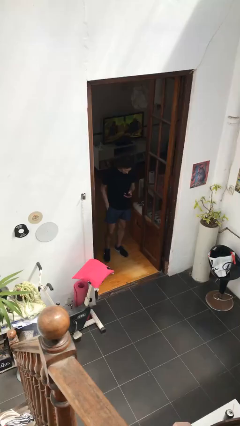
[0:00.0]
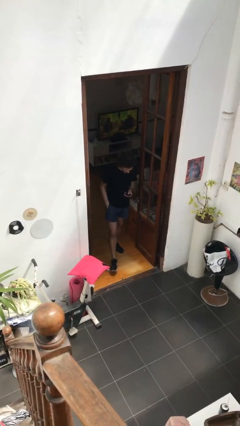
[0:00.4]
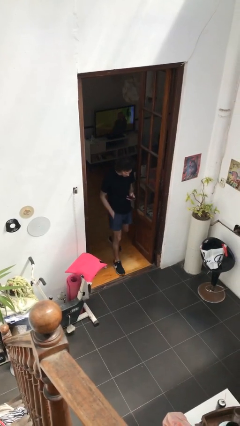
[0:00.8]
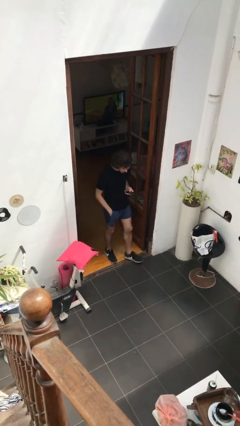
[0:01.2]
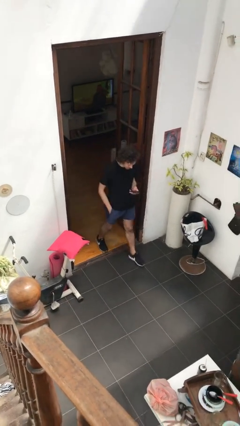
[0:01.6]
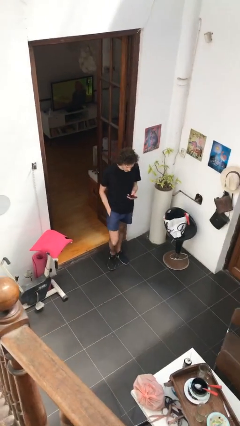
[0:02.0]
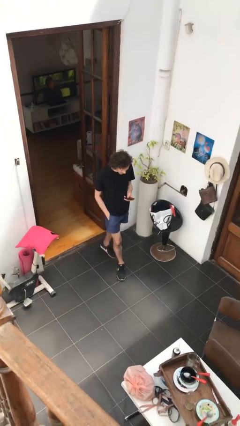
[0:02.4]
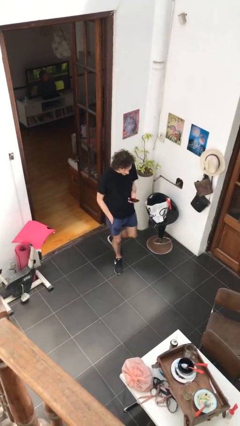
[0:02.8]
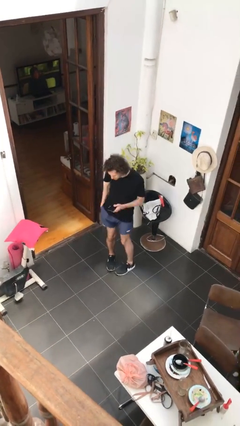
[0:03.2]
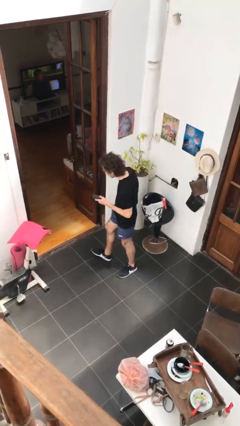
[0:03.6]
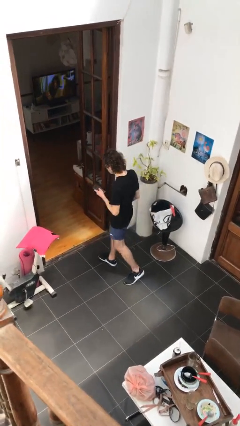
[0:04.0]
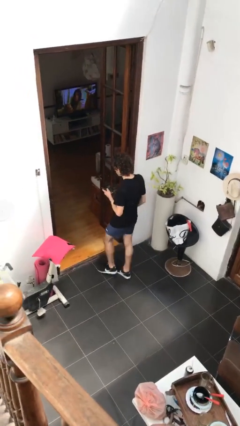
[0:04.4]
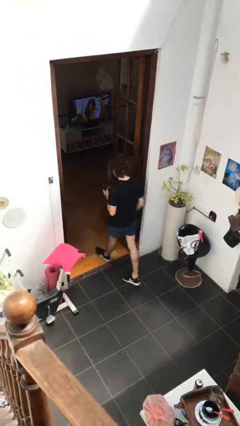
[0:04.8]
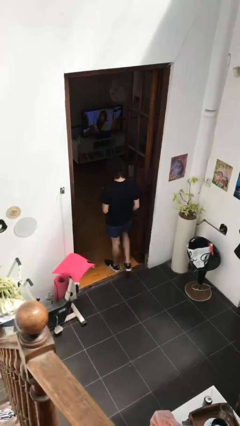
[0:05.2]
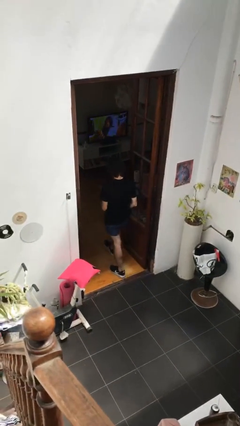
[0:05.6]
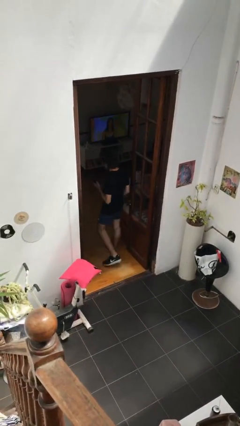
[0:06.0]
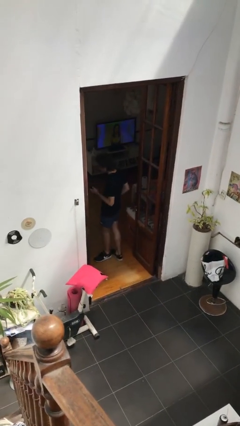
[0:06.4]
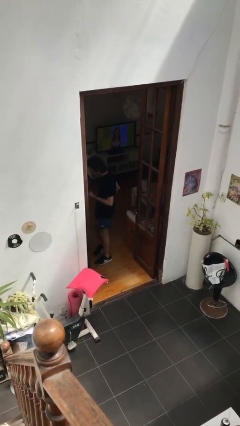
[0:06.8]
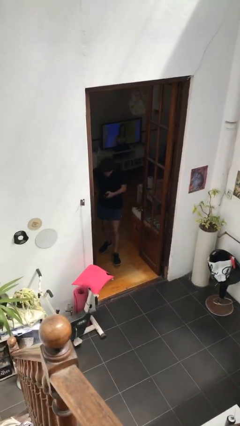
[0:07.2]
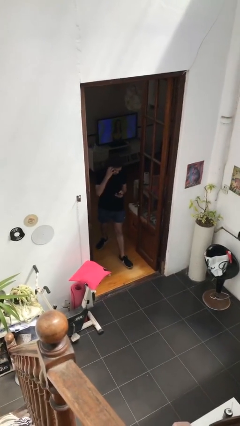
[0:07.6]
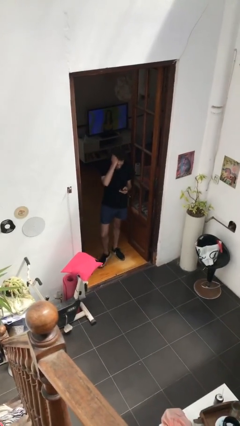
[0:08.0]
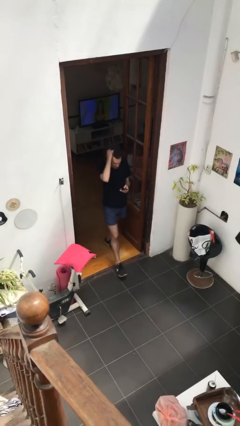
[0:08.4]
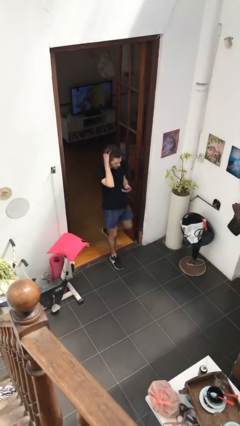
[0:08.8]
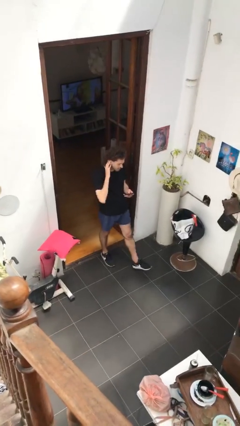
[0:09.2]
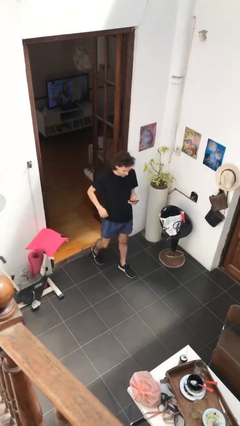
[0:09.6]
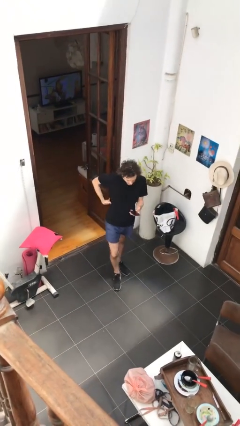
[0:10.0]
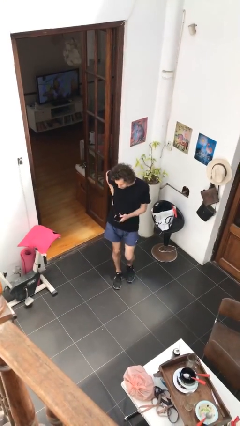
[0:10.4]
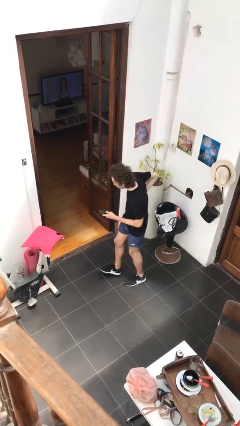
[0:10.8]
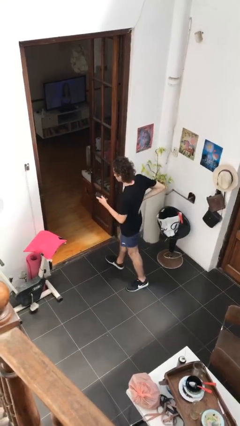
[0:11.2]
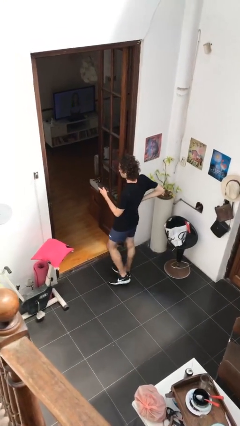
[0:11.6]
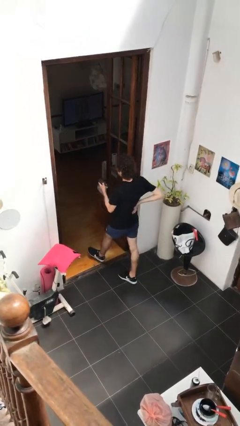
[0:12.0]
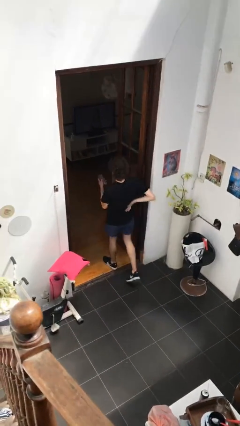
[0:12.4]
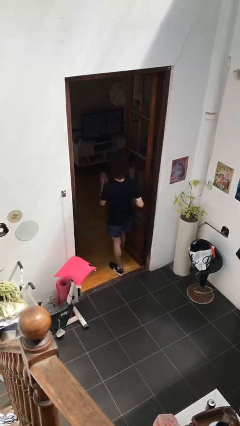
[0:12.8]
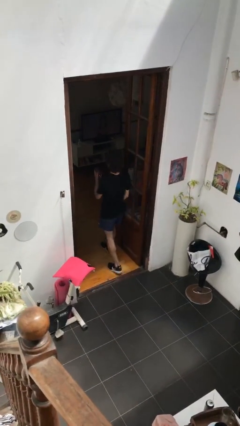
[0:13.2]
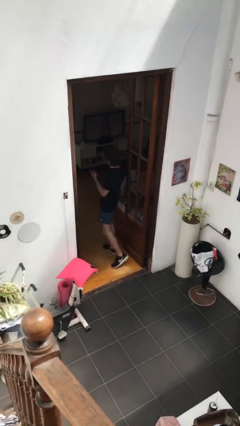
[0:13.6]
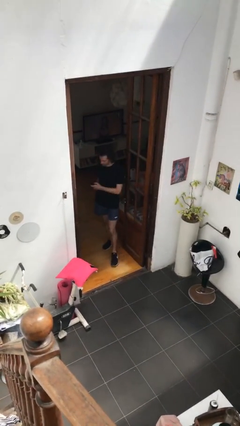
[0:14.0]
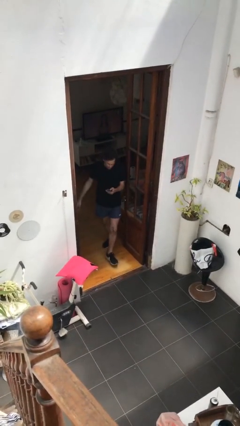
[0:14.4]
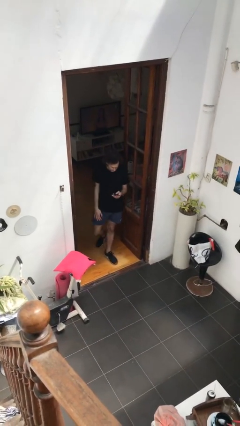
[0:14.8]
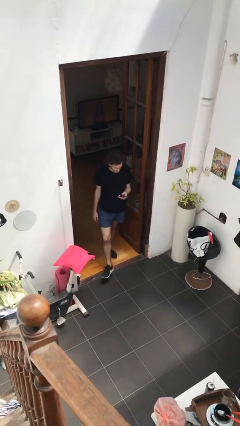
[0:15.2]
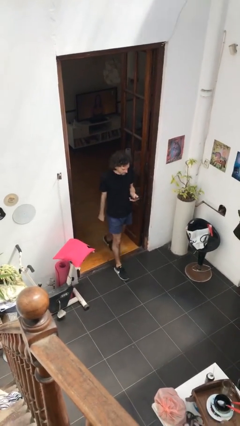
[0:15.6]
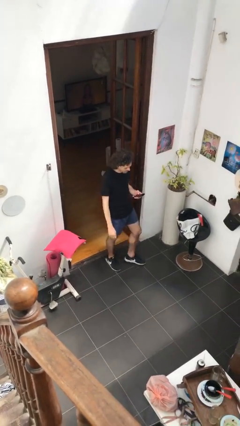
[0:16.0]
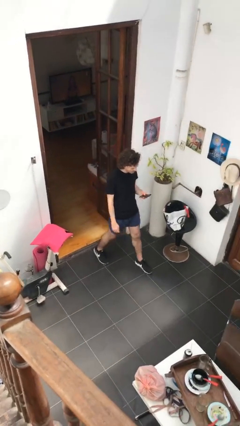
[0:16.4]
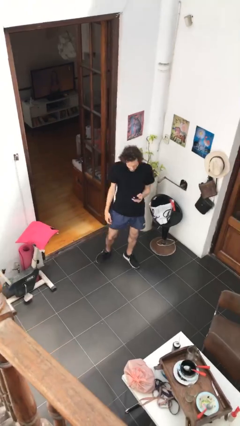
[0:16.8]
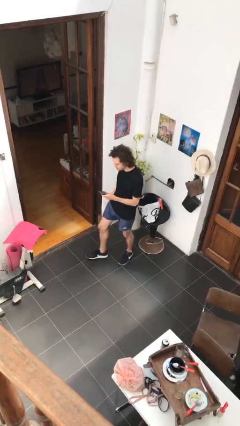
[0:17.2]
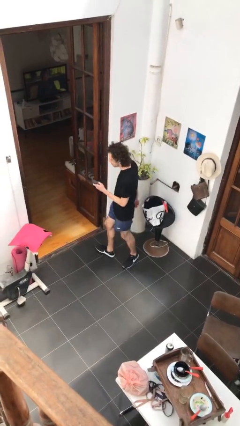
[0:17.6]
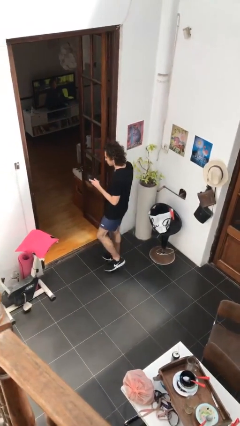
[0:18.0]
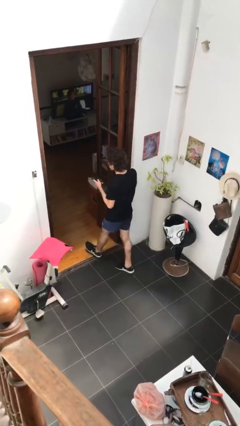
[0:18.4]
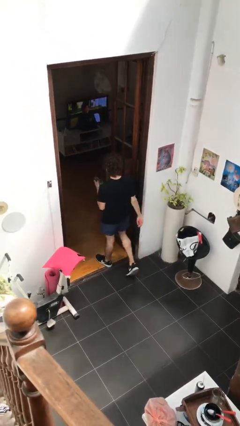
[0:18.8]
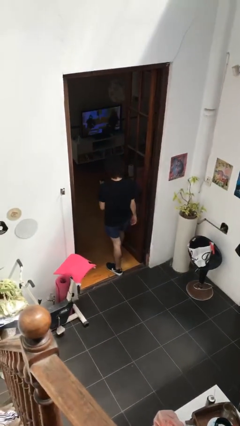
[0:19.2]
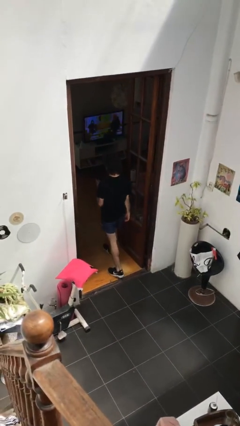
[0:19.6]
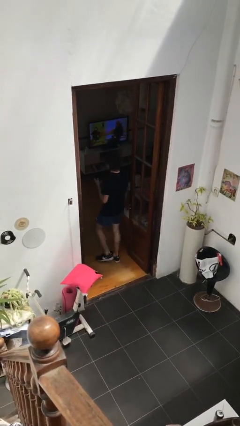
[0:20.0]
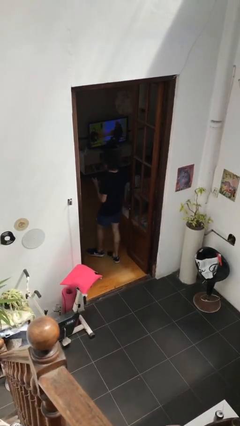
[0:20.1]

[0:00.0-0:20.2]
person texts on phone

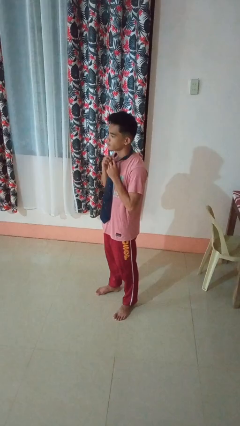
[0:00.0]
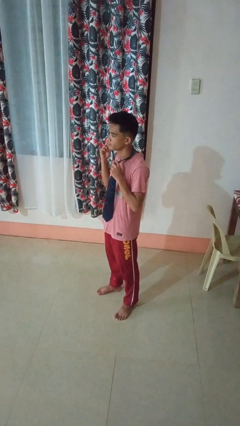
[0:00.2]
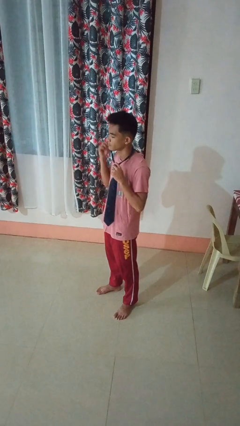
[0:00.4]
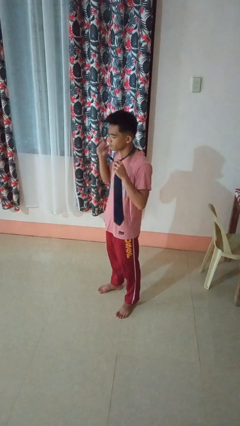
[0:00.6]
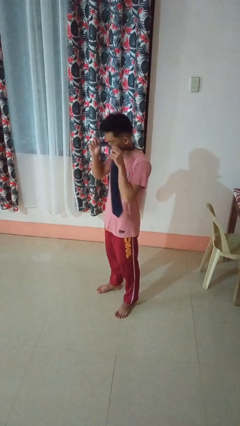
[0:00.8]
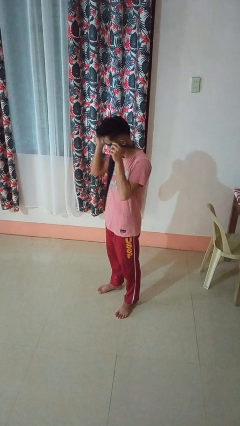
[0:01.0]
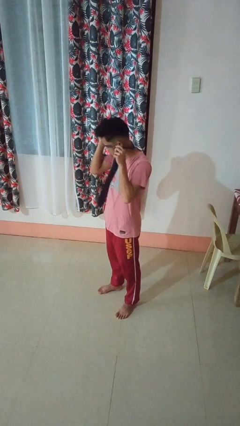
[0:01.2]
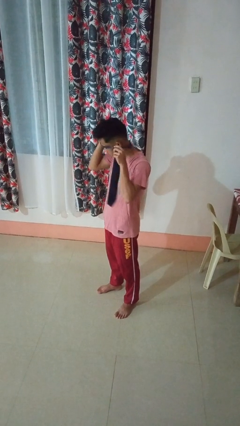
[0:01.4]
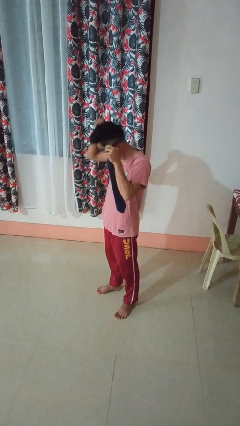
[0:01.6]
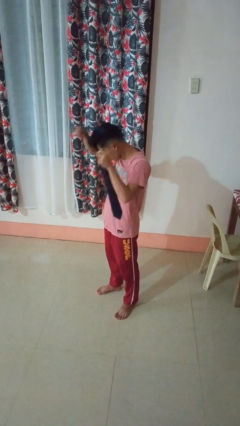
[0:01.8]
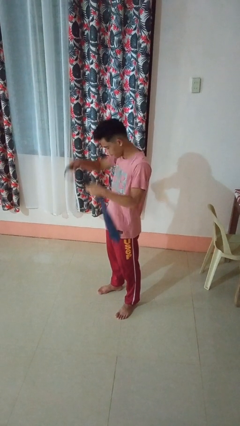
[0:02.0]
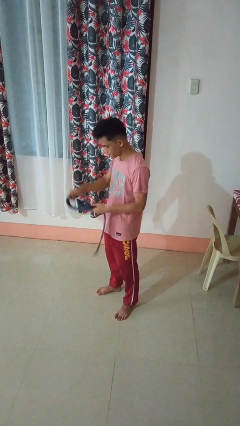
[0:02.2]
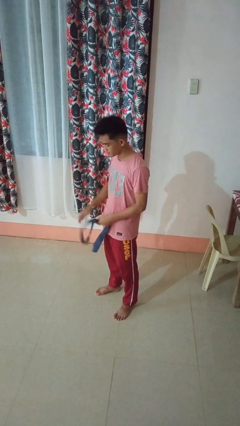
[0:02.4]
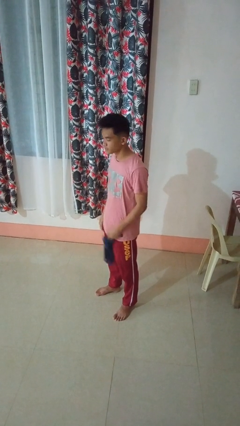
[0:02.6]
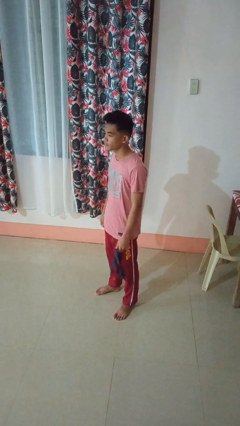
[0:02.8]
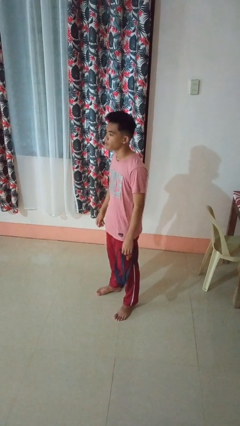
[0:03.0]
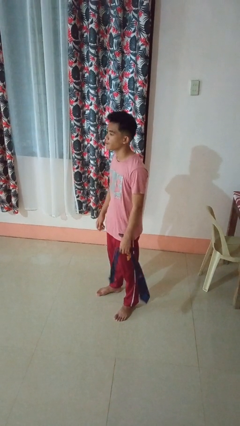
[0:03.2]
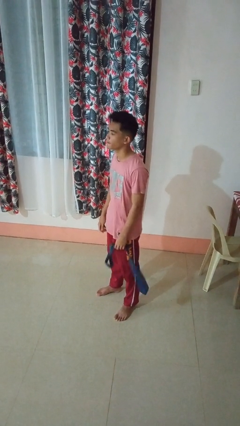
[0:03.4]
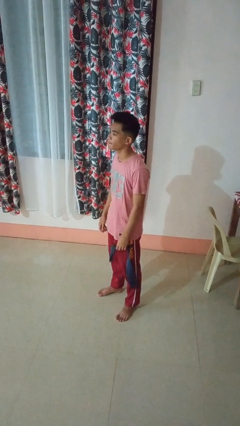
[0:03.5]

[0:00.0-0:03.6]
person takes off necktie

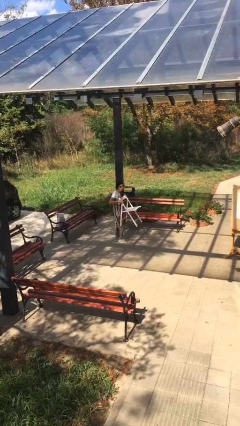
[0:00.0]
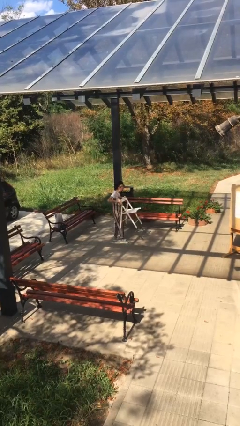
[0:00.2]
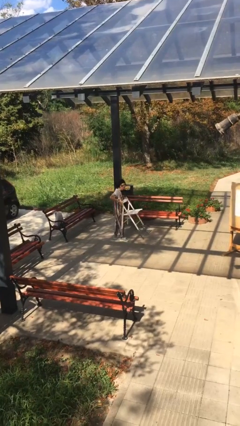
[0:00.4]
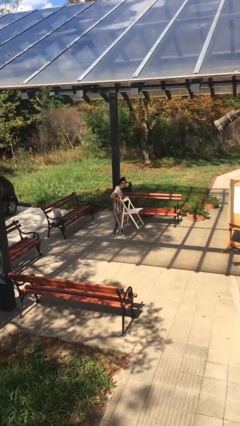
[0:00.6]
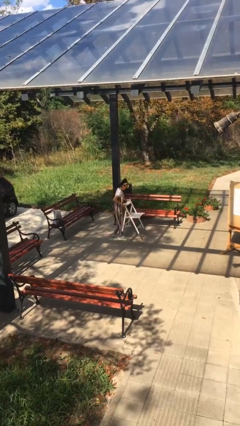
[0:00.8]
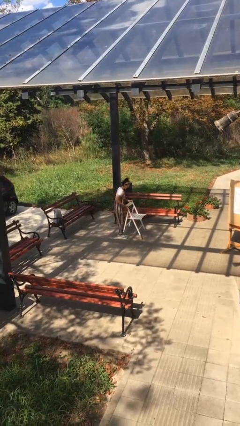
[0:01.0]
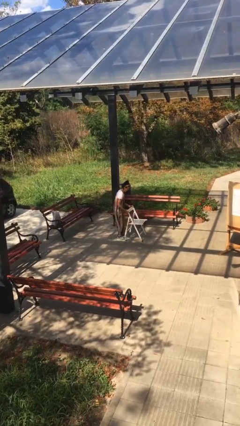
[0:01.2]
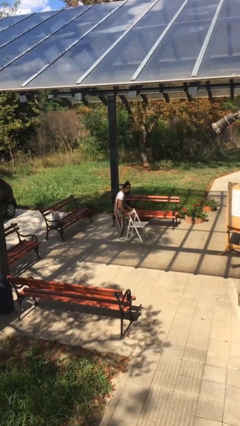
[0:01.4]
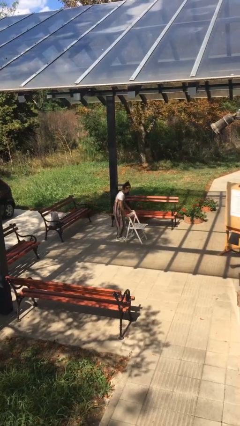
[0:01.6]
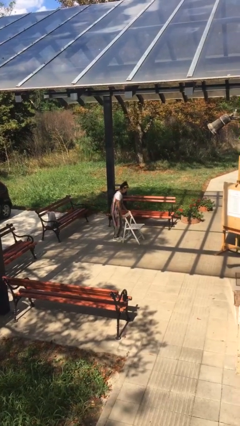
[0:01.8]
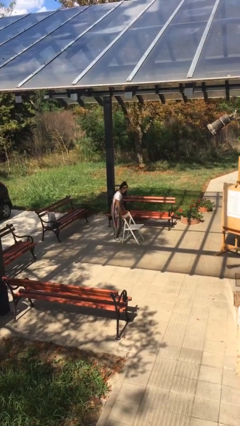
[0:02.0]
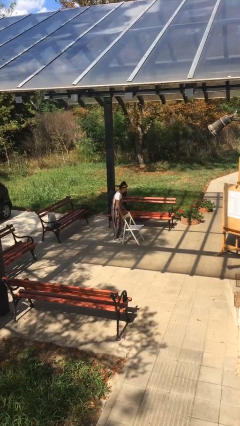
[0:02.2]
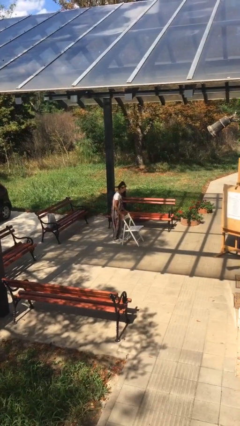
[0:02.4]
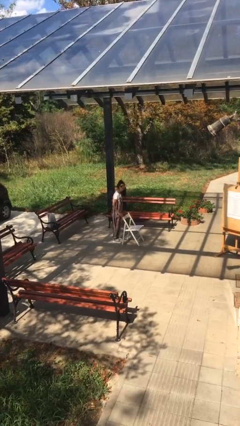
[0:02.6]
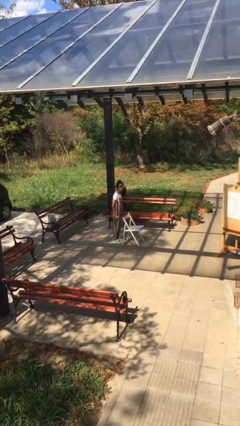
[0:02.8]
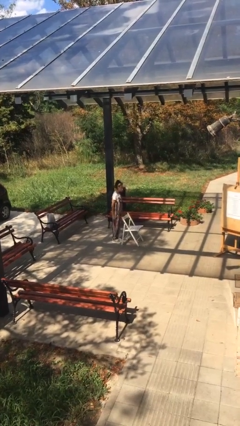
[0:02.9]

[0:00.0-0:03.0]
person puts down object on floor

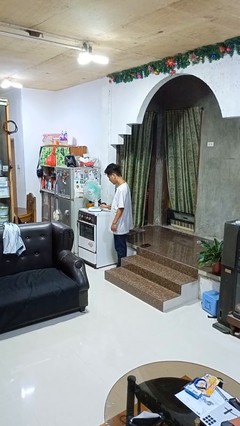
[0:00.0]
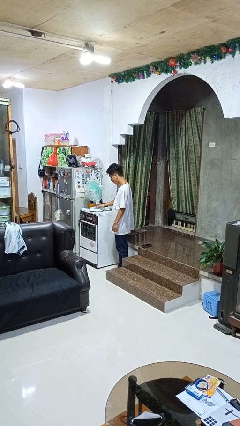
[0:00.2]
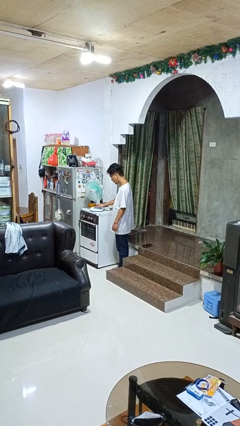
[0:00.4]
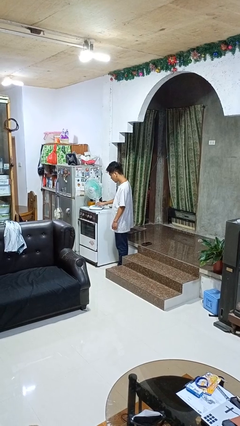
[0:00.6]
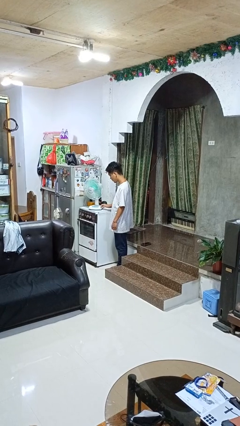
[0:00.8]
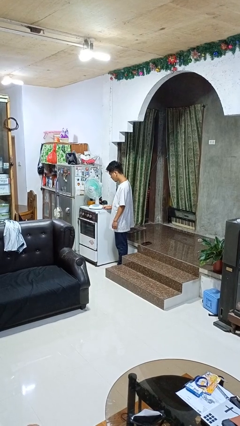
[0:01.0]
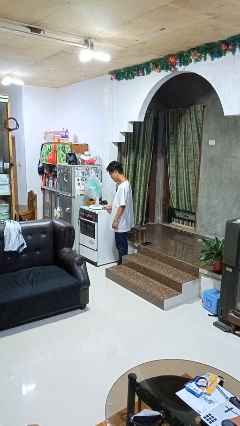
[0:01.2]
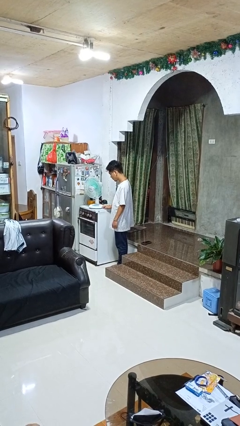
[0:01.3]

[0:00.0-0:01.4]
person turns off fan
